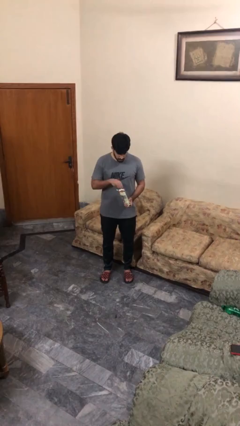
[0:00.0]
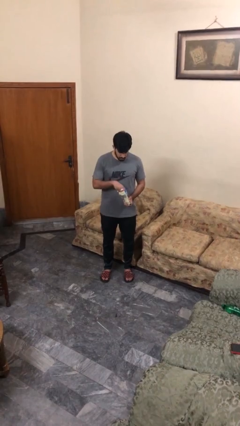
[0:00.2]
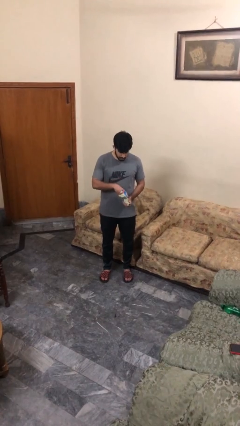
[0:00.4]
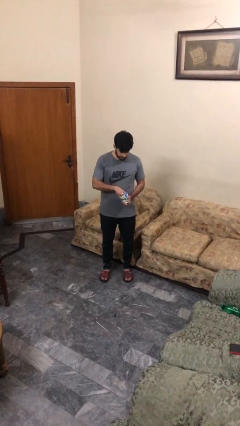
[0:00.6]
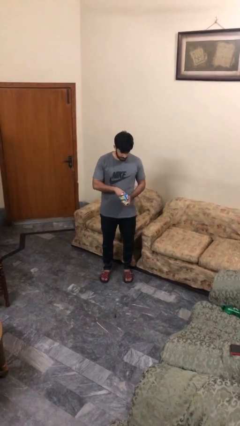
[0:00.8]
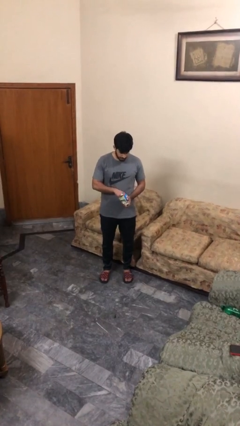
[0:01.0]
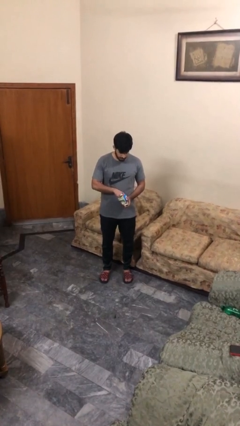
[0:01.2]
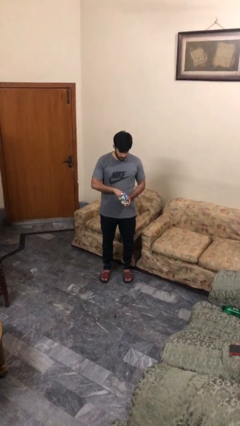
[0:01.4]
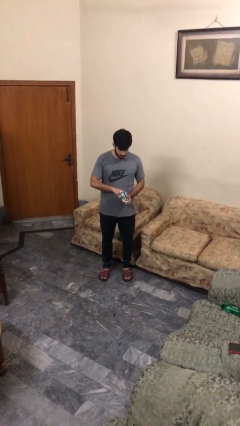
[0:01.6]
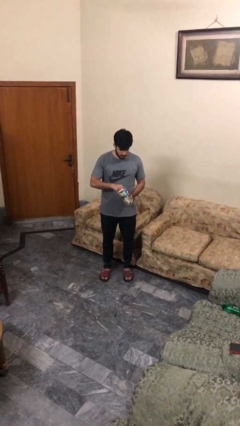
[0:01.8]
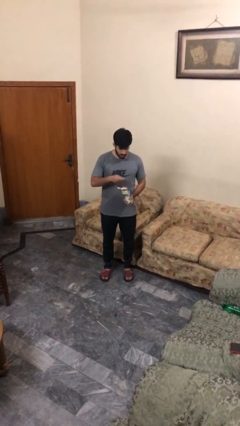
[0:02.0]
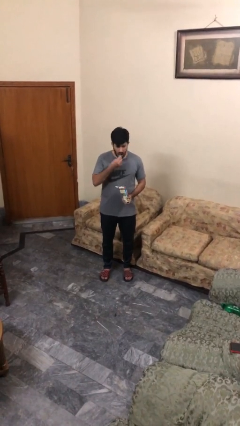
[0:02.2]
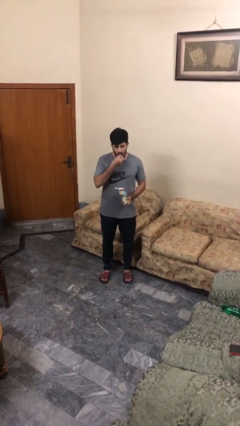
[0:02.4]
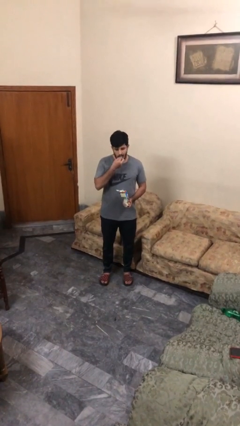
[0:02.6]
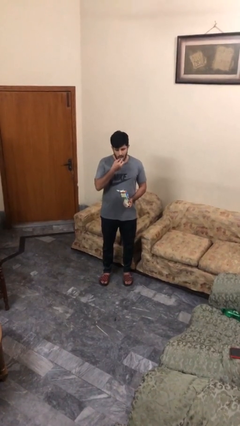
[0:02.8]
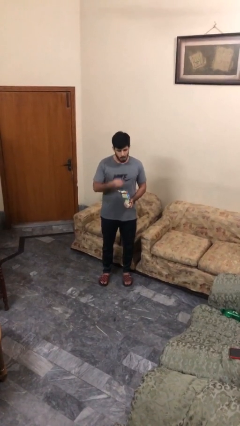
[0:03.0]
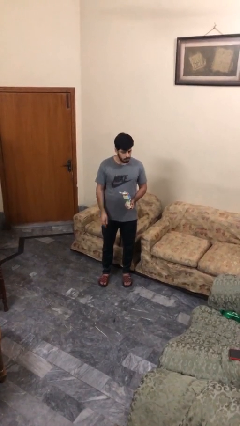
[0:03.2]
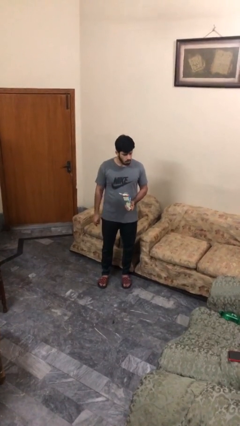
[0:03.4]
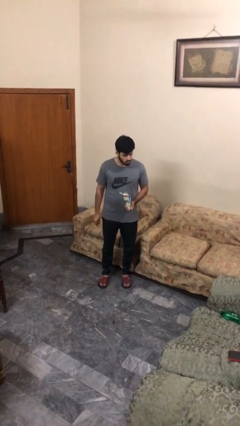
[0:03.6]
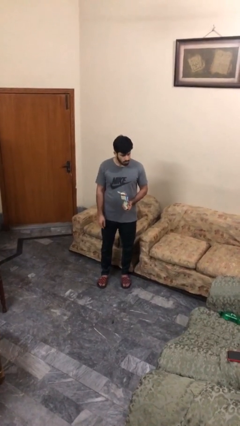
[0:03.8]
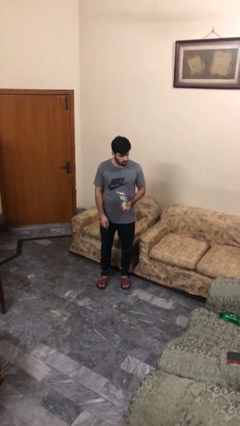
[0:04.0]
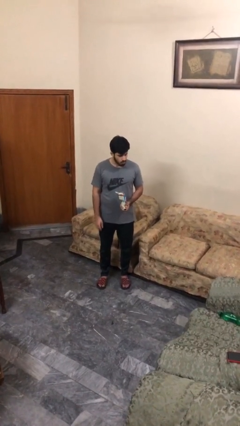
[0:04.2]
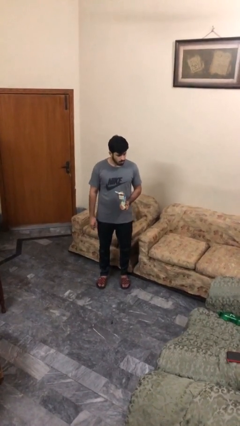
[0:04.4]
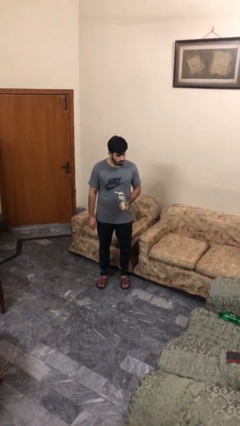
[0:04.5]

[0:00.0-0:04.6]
person eats snack from bag

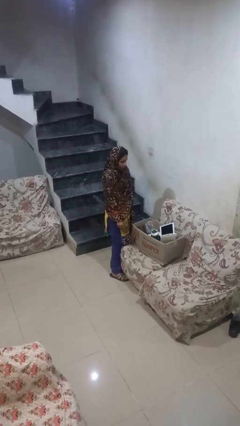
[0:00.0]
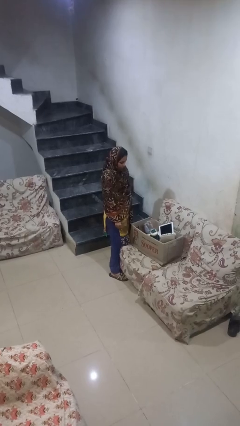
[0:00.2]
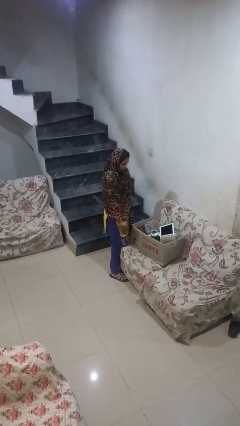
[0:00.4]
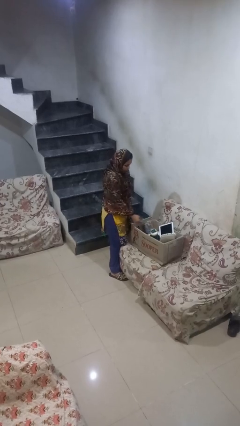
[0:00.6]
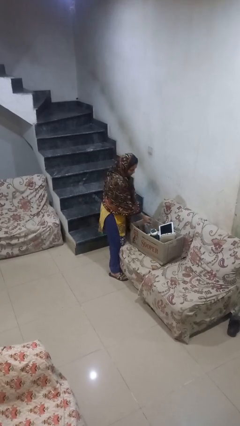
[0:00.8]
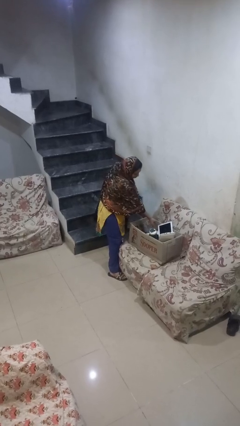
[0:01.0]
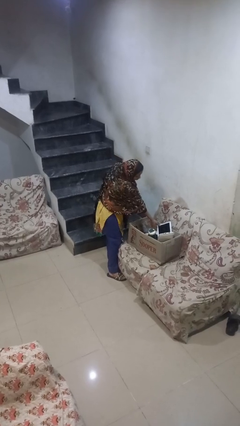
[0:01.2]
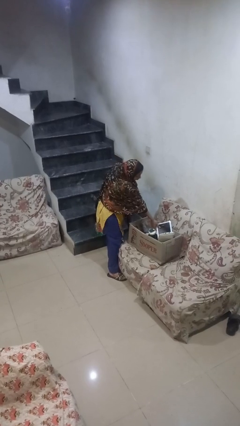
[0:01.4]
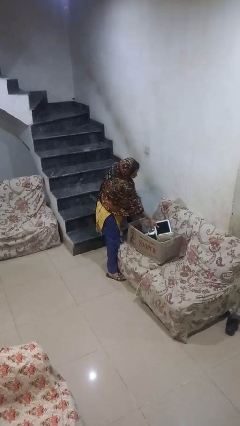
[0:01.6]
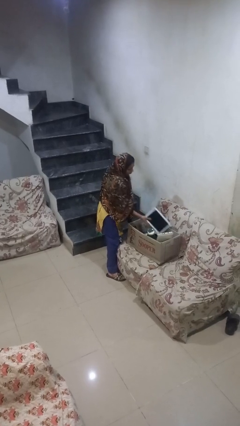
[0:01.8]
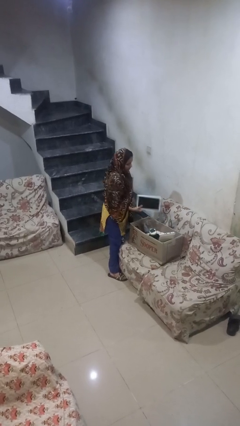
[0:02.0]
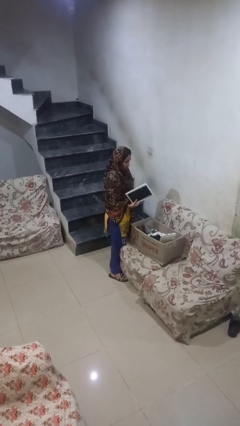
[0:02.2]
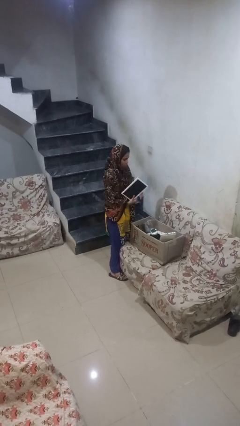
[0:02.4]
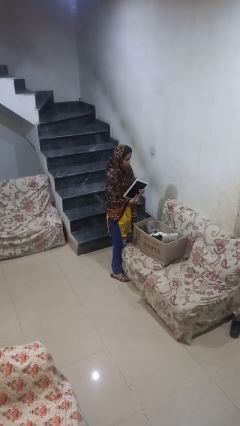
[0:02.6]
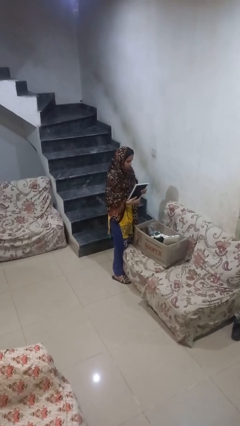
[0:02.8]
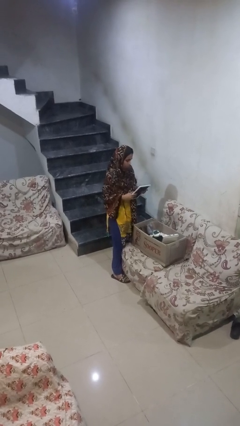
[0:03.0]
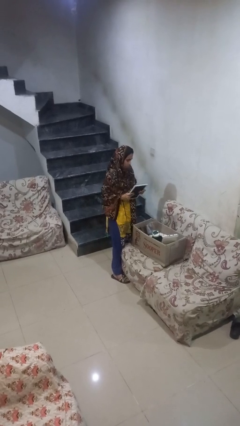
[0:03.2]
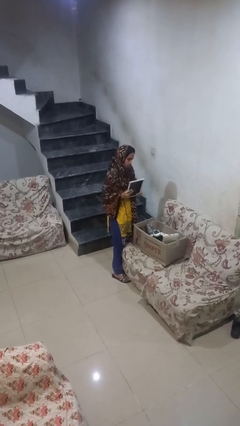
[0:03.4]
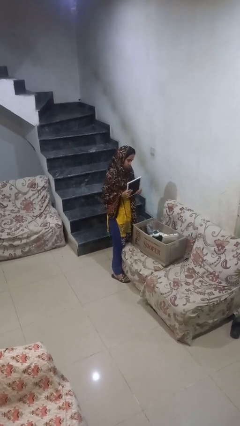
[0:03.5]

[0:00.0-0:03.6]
person takes object from box

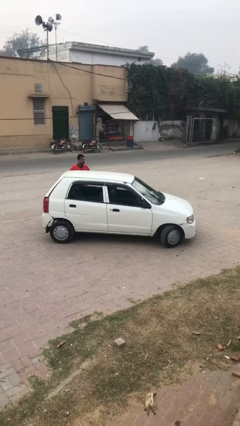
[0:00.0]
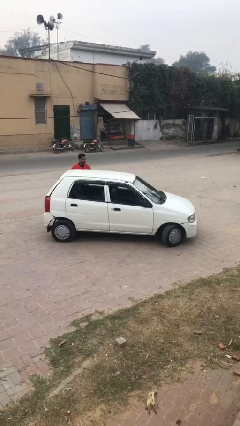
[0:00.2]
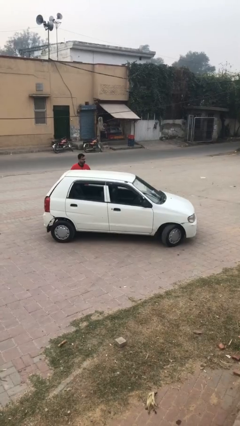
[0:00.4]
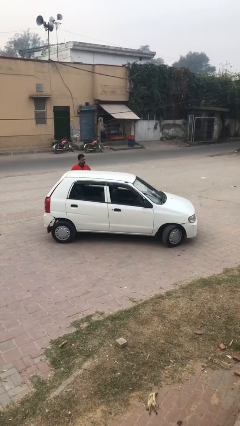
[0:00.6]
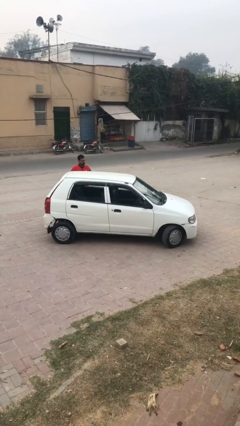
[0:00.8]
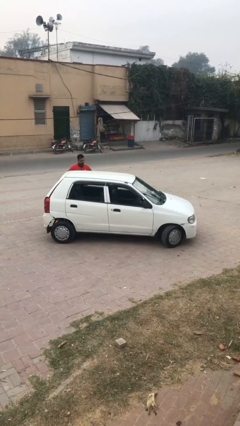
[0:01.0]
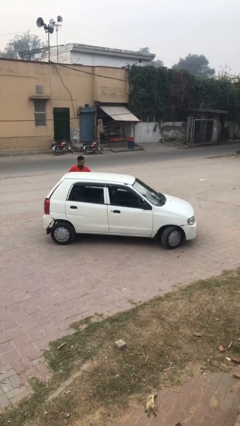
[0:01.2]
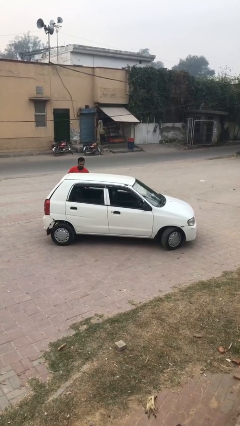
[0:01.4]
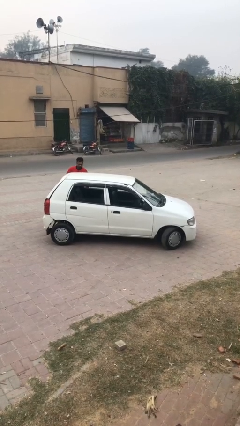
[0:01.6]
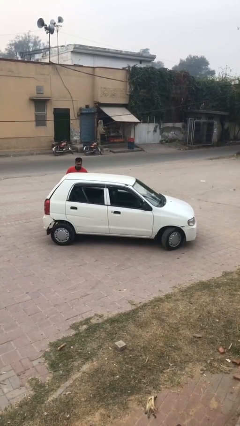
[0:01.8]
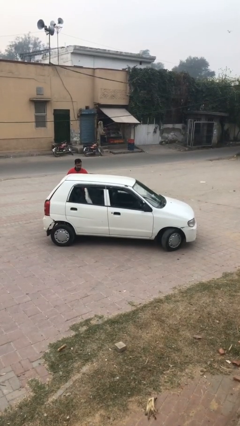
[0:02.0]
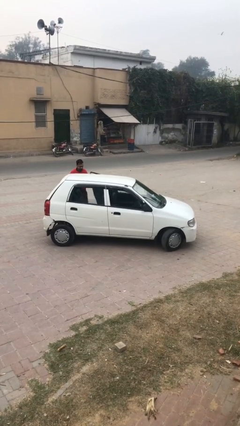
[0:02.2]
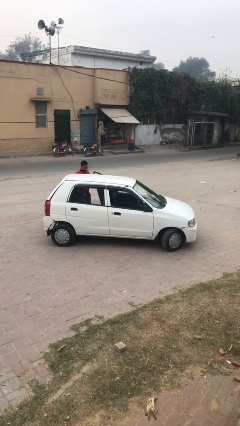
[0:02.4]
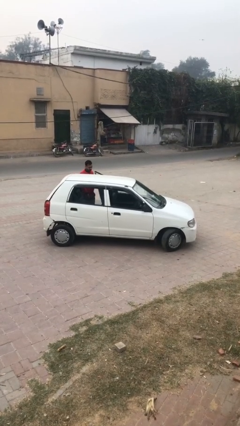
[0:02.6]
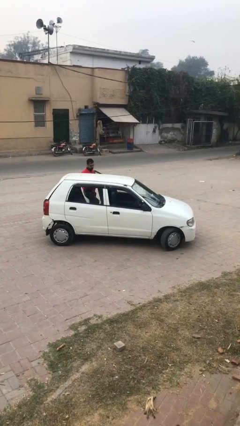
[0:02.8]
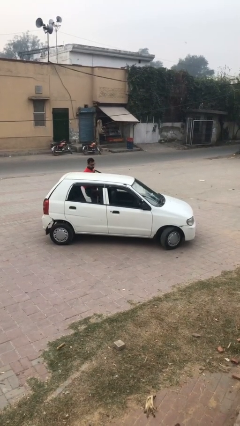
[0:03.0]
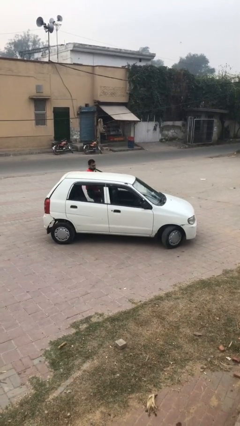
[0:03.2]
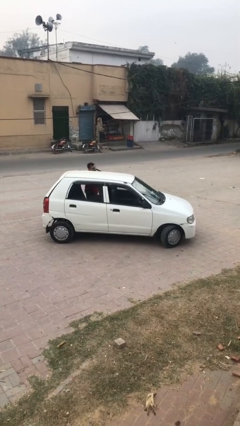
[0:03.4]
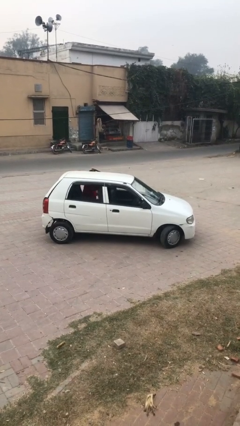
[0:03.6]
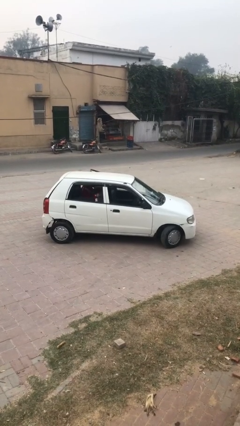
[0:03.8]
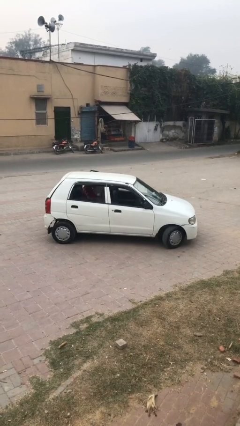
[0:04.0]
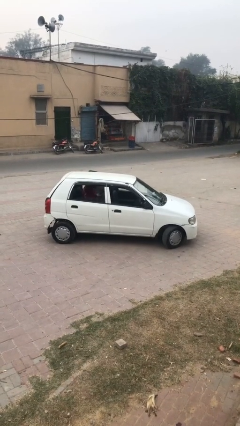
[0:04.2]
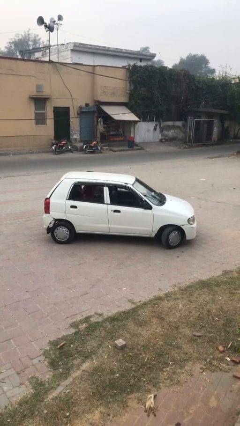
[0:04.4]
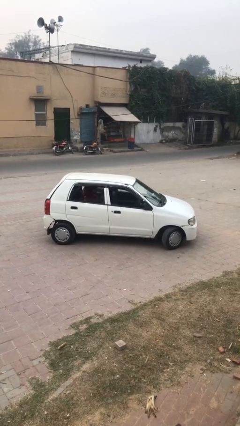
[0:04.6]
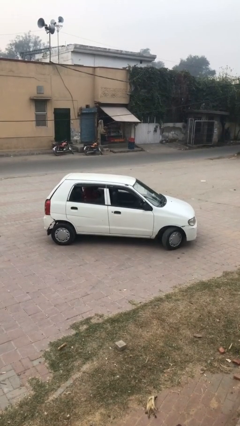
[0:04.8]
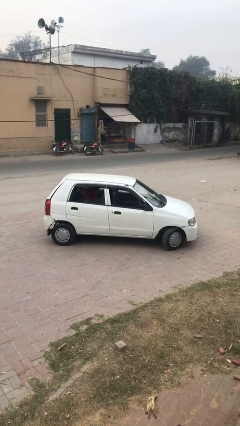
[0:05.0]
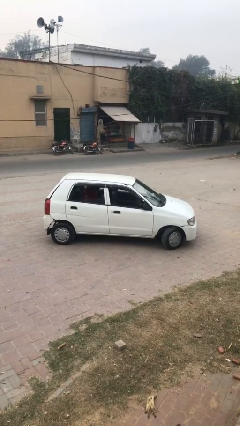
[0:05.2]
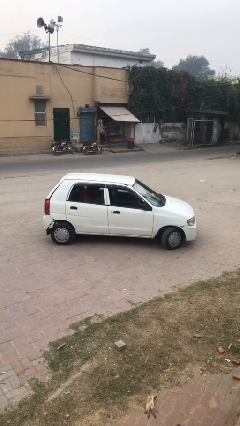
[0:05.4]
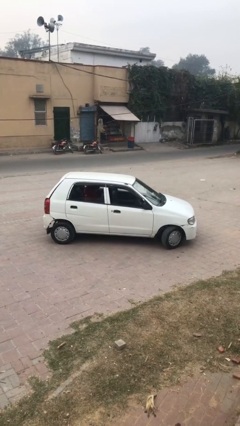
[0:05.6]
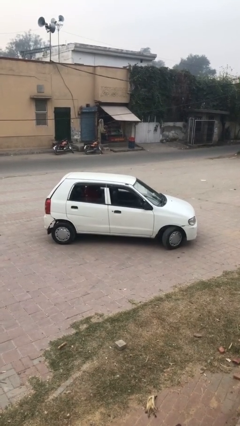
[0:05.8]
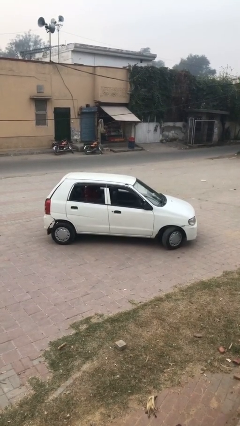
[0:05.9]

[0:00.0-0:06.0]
car picks up person

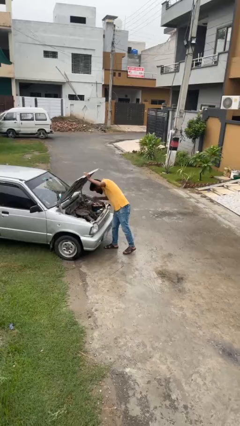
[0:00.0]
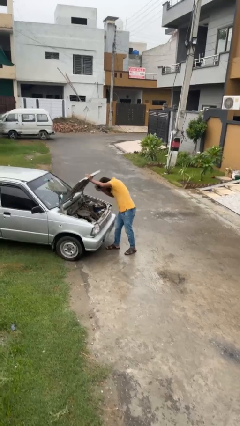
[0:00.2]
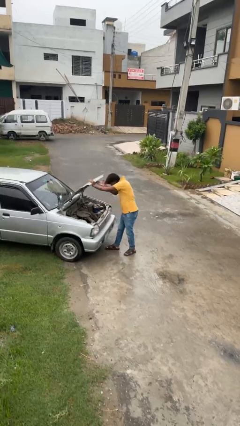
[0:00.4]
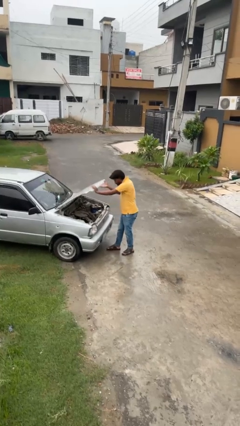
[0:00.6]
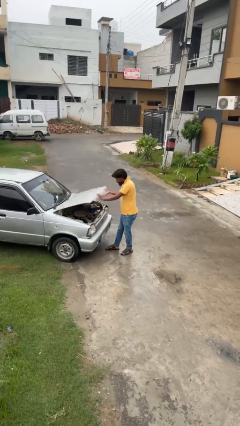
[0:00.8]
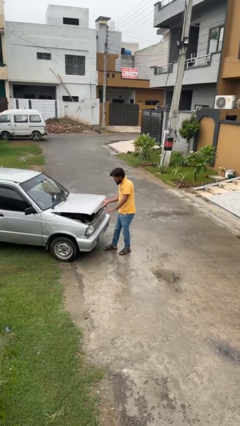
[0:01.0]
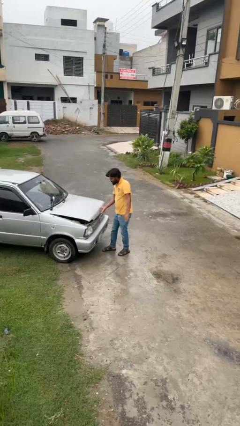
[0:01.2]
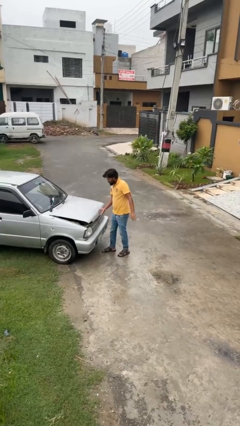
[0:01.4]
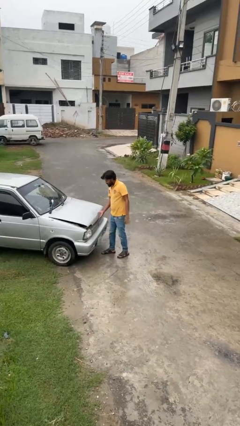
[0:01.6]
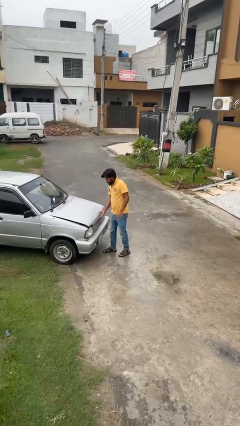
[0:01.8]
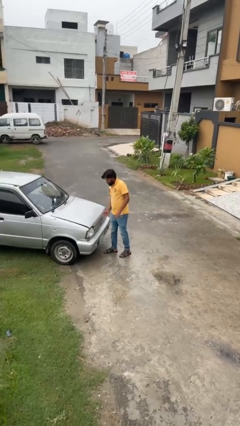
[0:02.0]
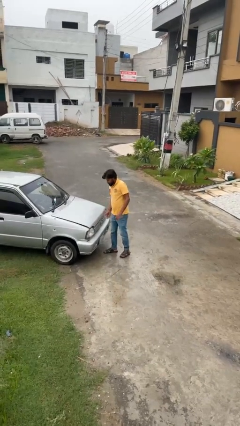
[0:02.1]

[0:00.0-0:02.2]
person closes car hood

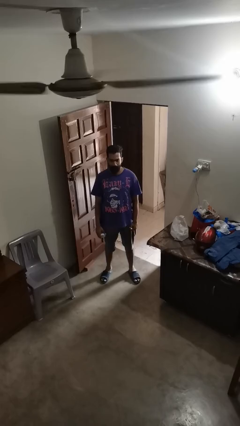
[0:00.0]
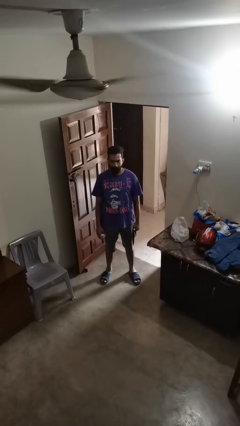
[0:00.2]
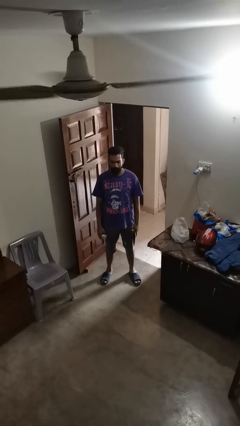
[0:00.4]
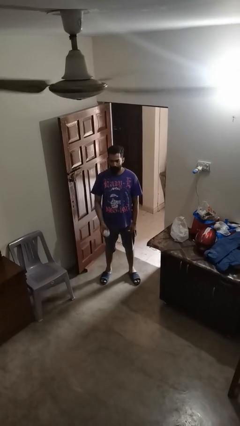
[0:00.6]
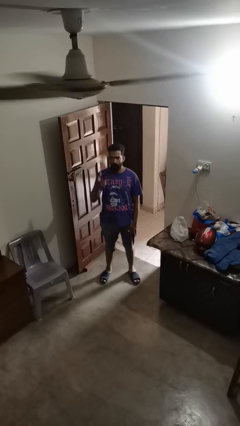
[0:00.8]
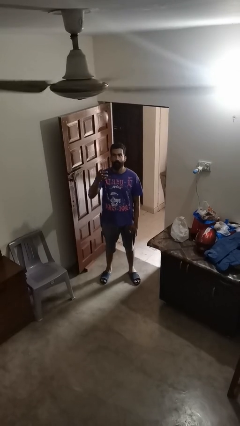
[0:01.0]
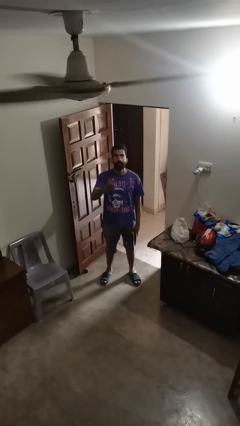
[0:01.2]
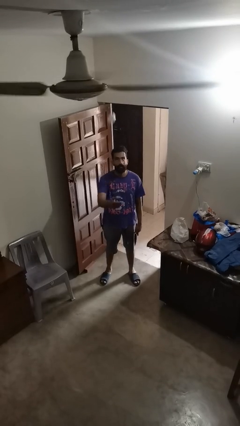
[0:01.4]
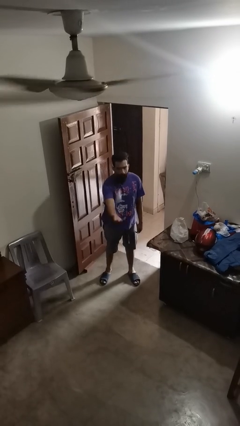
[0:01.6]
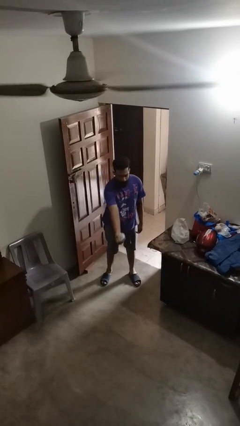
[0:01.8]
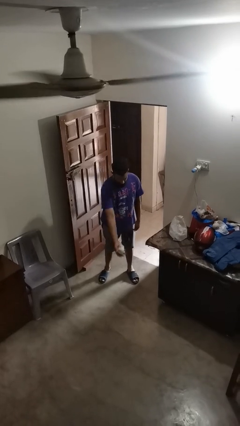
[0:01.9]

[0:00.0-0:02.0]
person drops object
